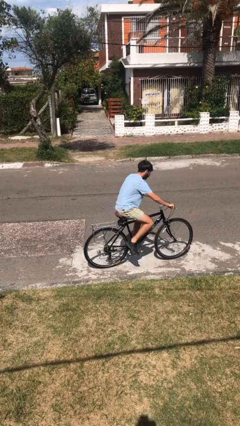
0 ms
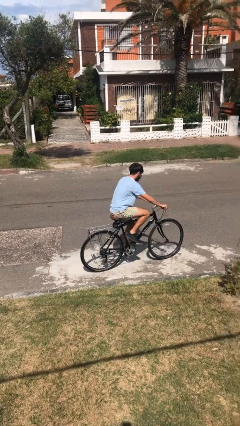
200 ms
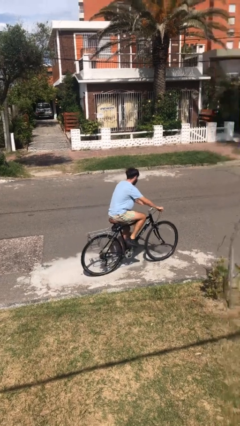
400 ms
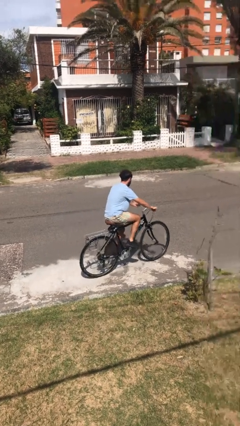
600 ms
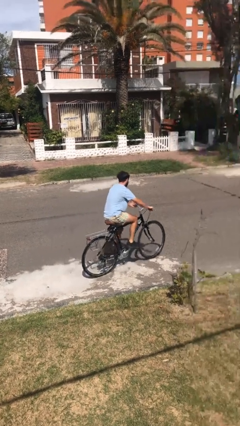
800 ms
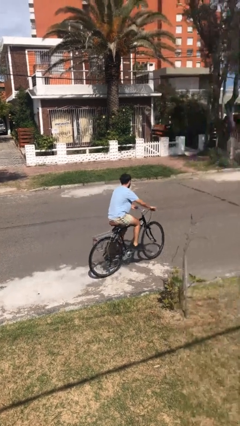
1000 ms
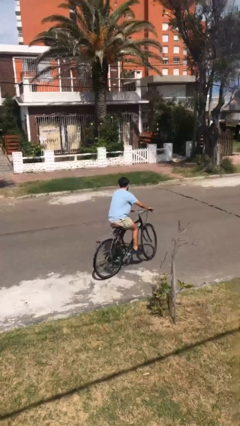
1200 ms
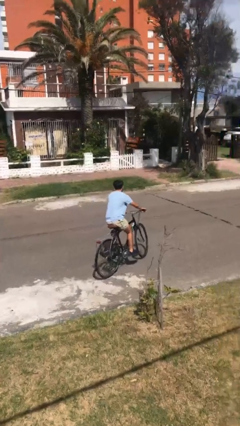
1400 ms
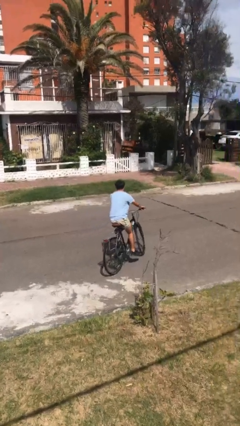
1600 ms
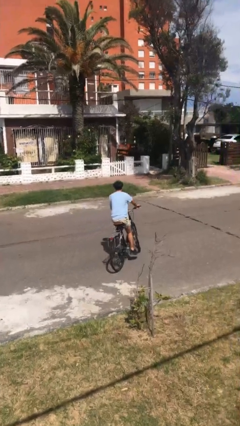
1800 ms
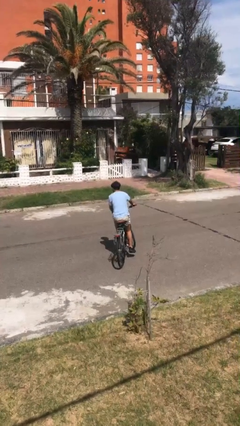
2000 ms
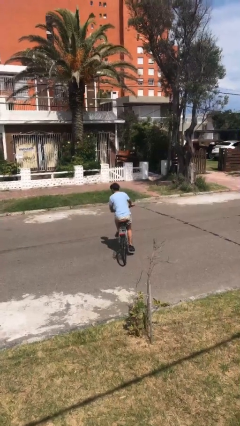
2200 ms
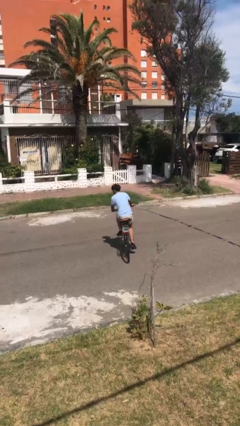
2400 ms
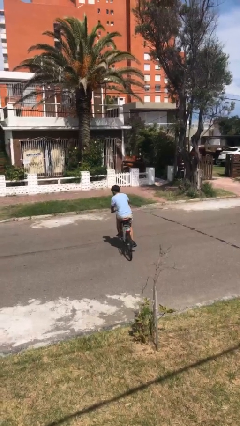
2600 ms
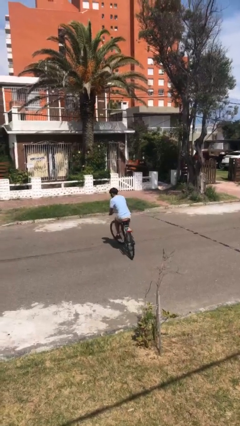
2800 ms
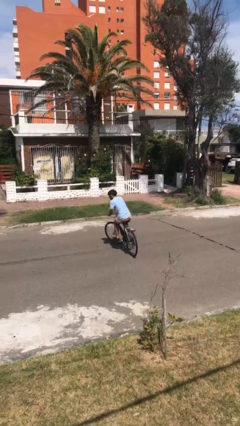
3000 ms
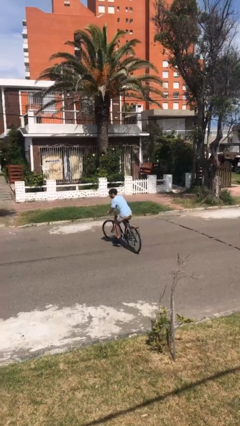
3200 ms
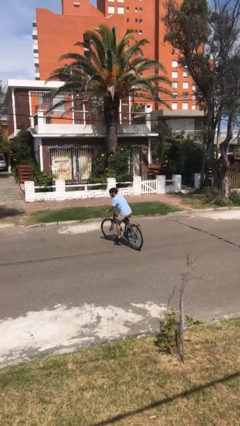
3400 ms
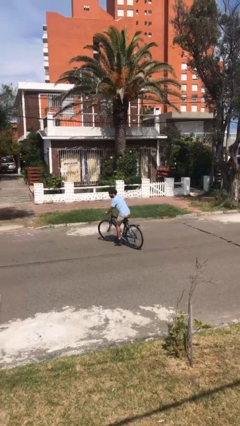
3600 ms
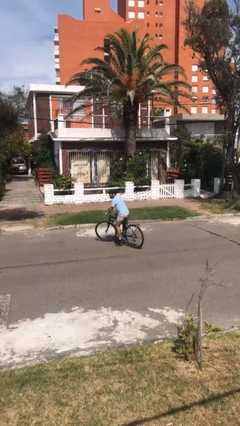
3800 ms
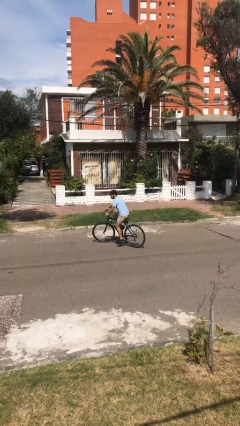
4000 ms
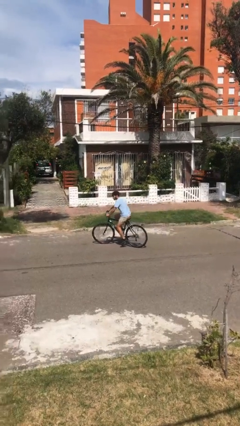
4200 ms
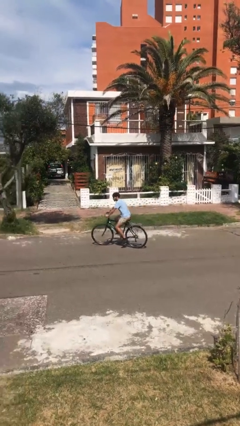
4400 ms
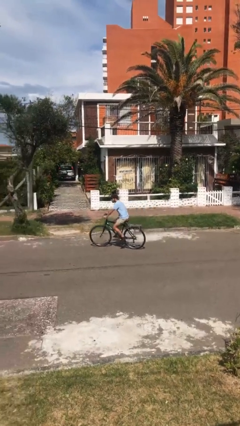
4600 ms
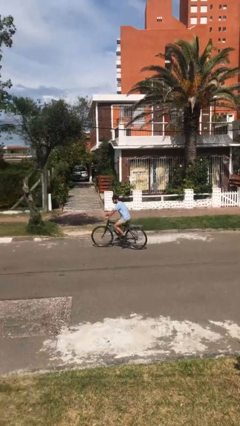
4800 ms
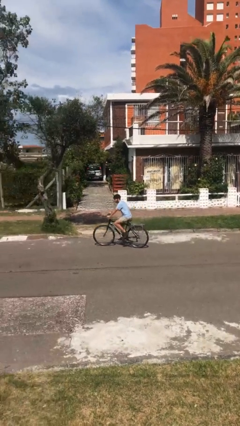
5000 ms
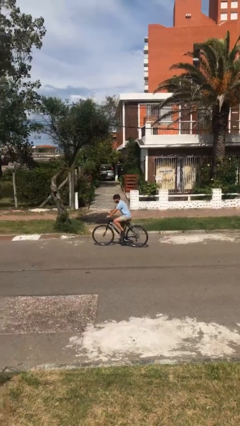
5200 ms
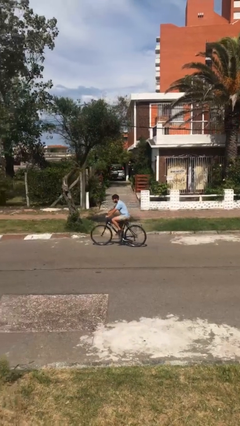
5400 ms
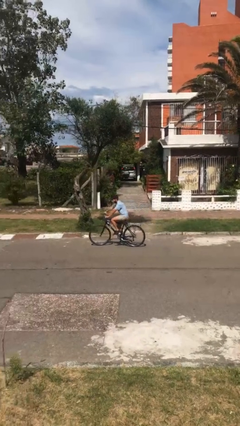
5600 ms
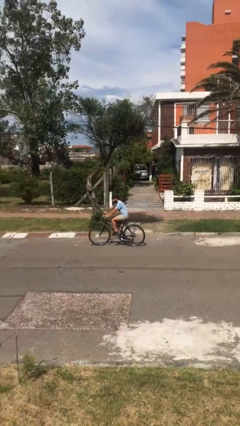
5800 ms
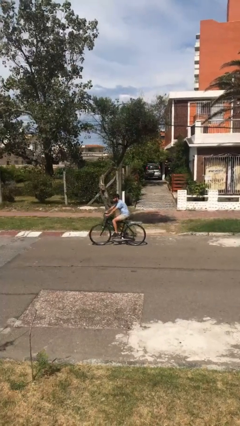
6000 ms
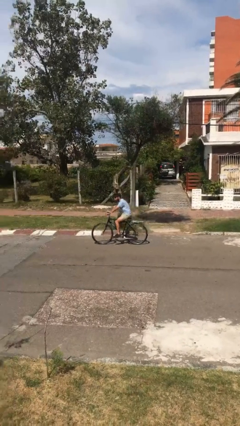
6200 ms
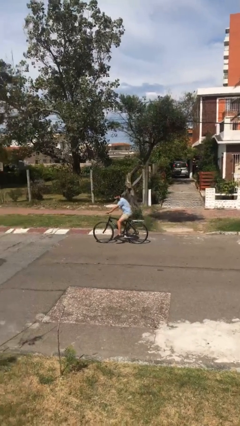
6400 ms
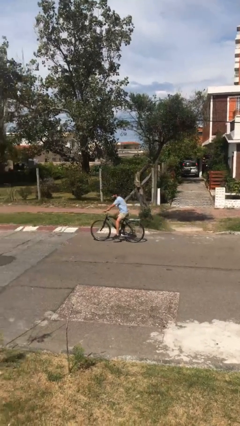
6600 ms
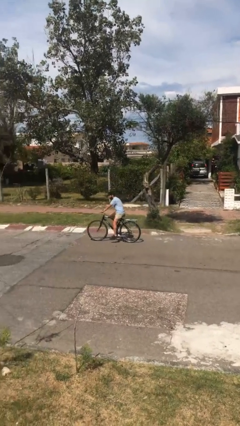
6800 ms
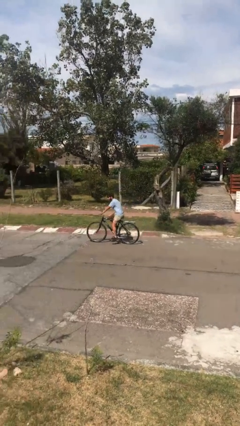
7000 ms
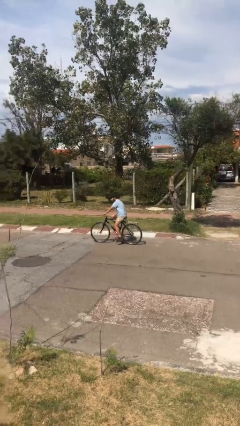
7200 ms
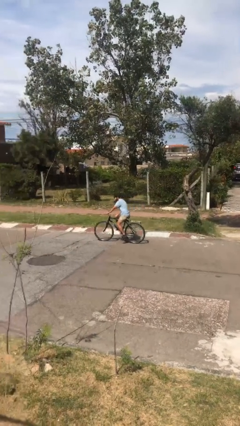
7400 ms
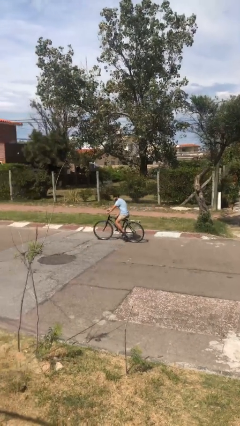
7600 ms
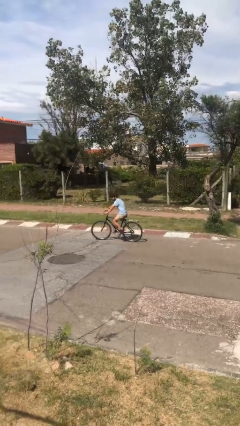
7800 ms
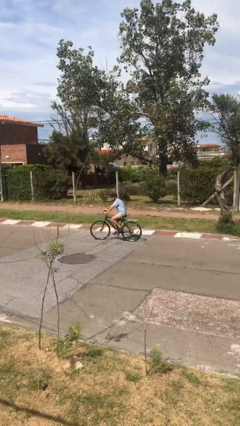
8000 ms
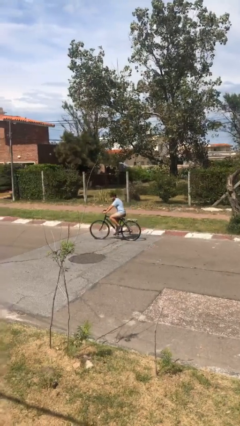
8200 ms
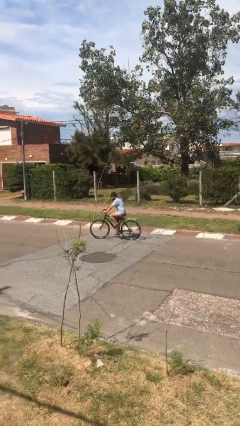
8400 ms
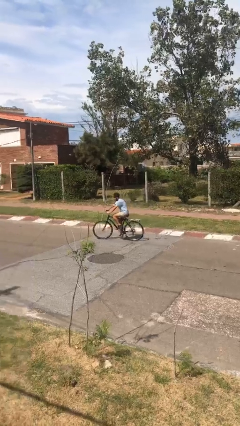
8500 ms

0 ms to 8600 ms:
person rides bicycle

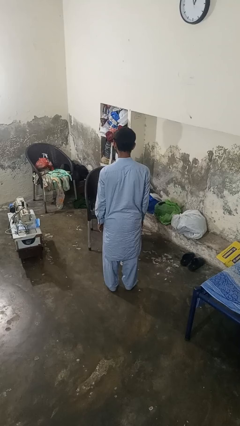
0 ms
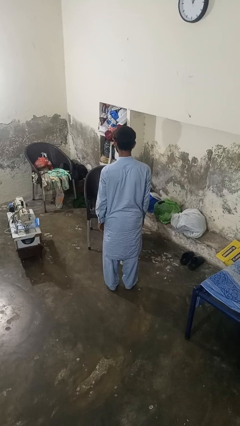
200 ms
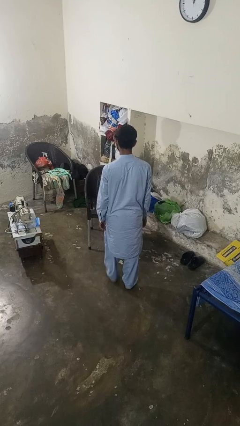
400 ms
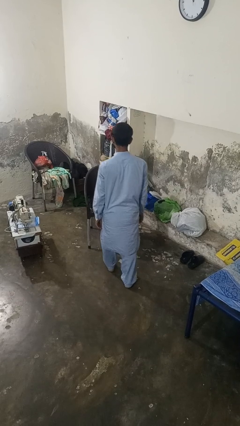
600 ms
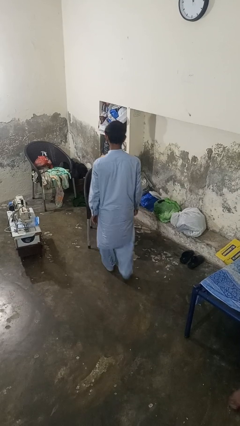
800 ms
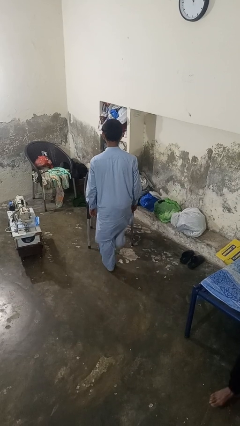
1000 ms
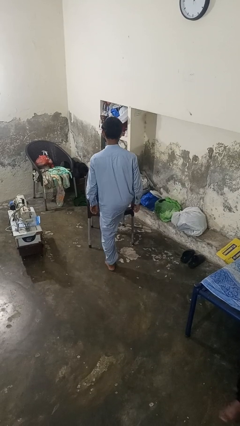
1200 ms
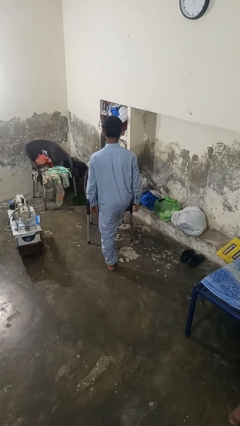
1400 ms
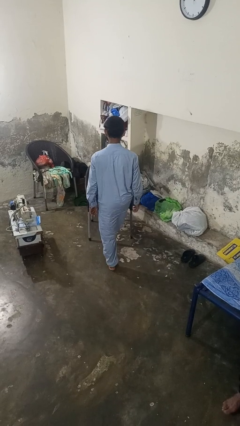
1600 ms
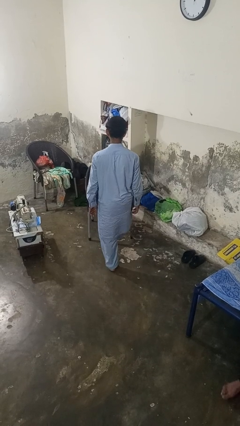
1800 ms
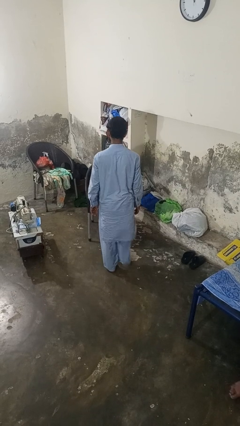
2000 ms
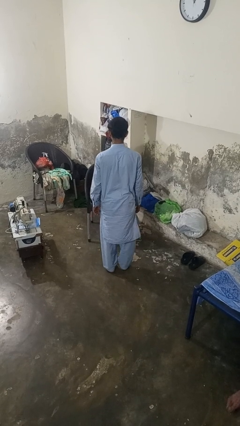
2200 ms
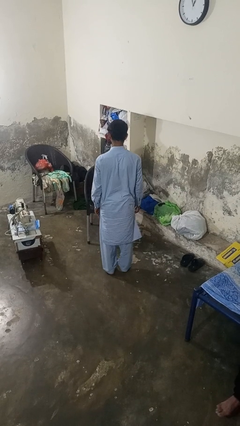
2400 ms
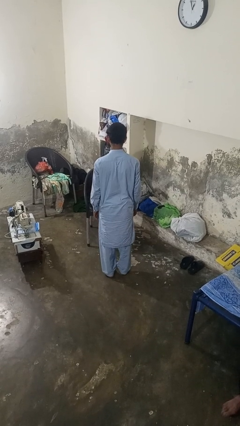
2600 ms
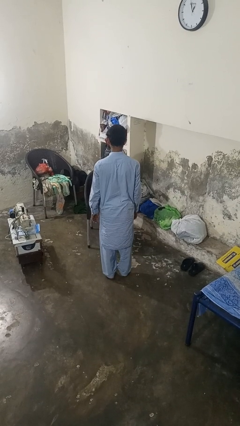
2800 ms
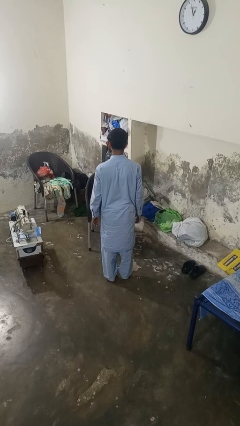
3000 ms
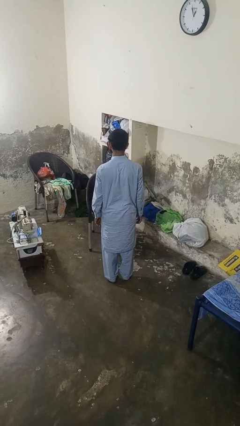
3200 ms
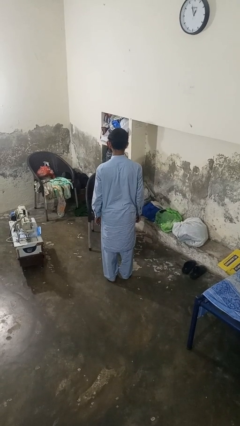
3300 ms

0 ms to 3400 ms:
person stubs toe

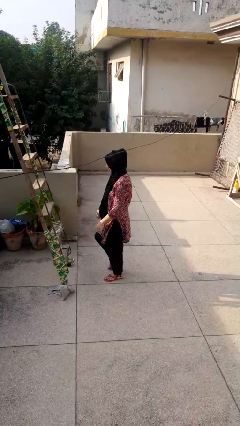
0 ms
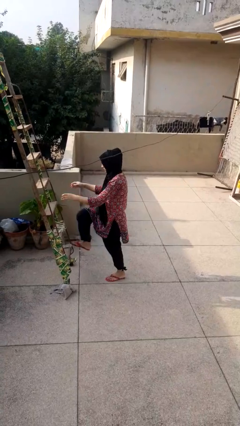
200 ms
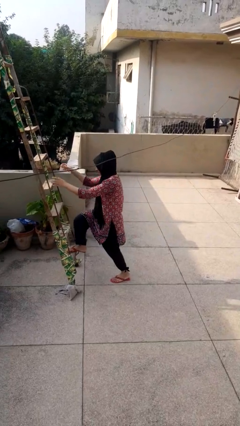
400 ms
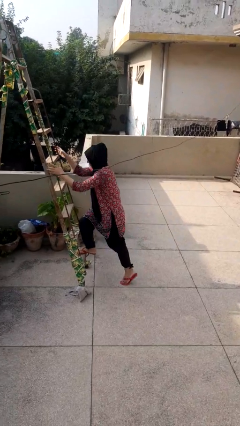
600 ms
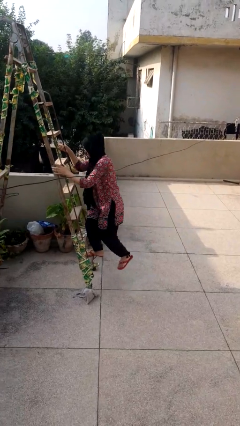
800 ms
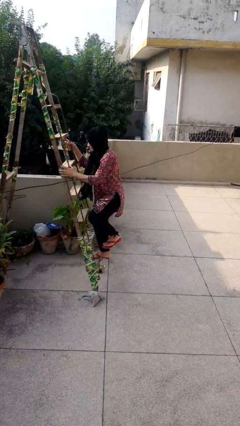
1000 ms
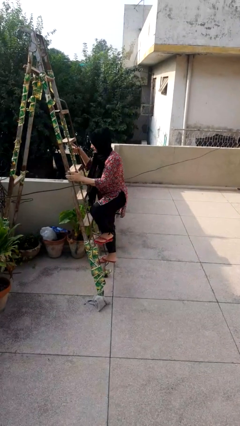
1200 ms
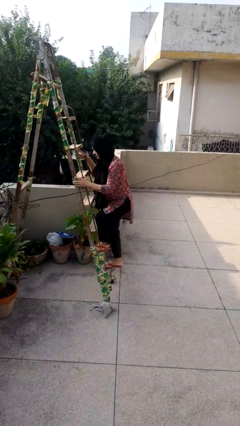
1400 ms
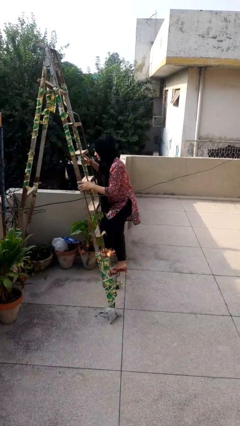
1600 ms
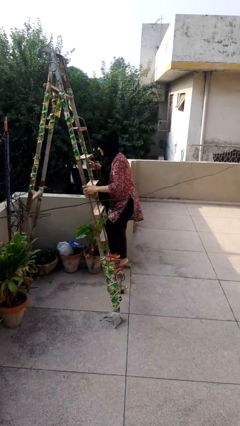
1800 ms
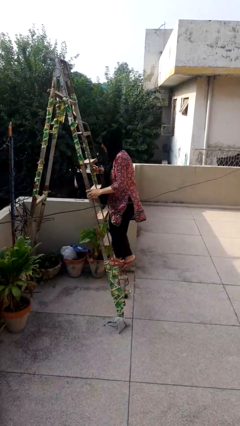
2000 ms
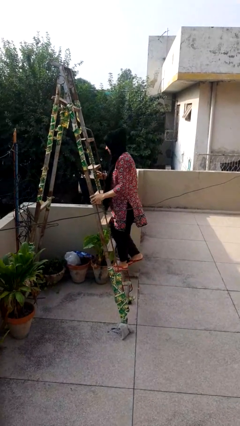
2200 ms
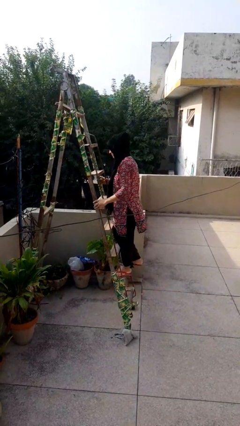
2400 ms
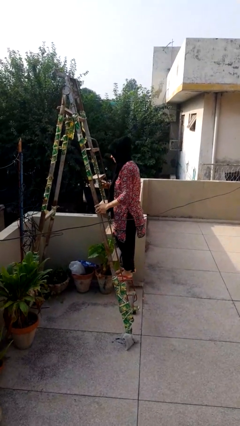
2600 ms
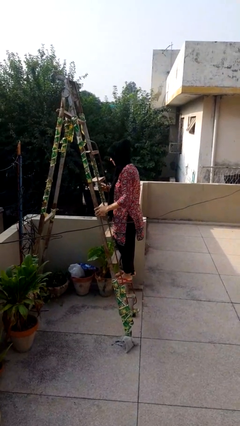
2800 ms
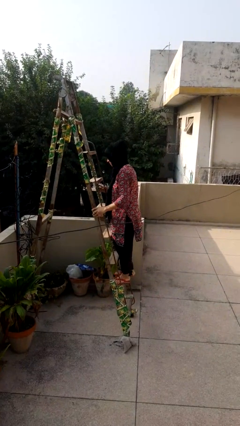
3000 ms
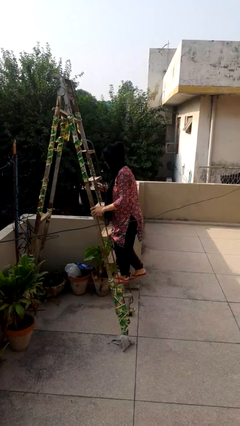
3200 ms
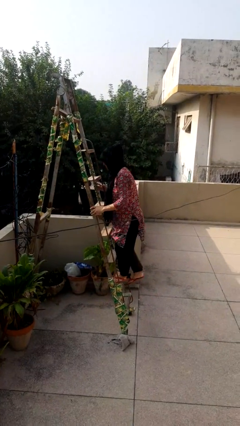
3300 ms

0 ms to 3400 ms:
person climbs up ladder

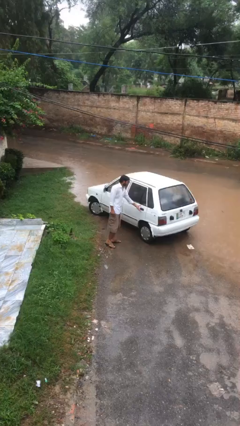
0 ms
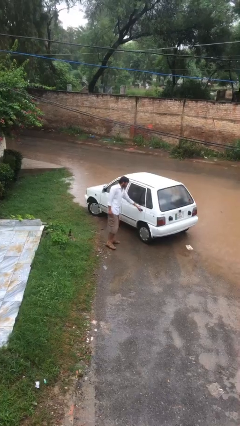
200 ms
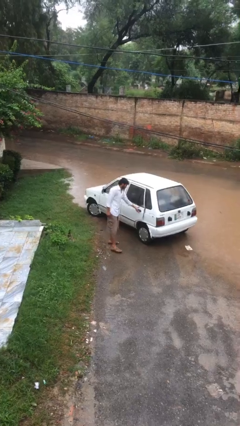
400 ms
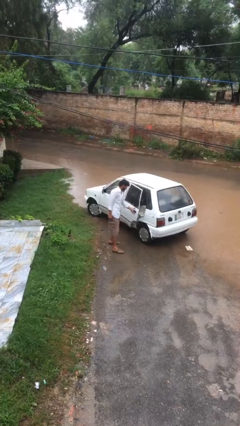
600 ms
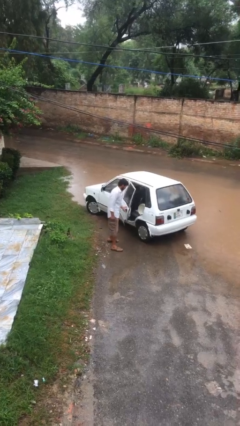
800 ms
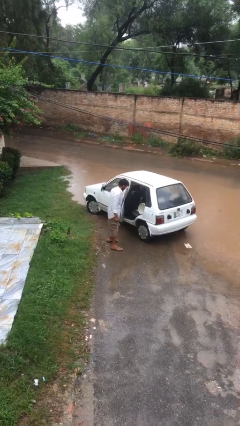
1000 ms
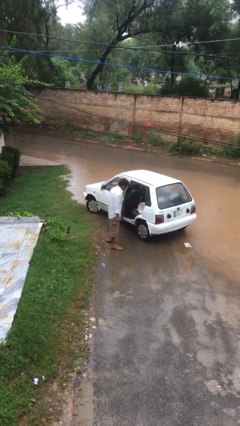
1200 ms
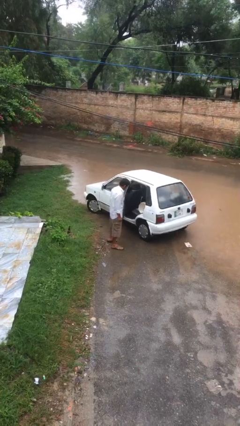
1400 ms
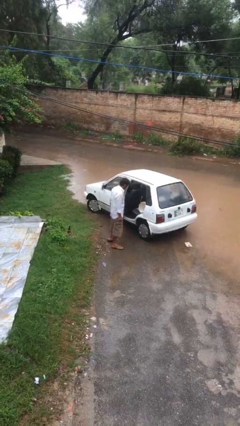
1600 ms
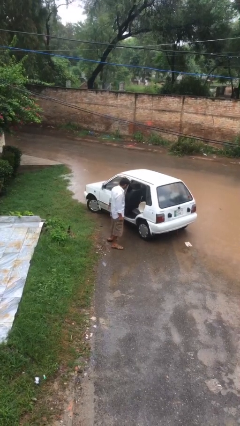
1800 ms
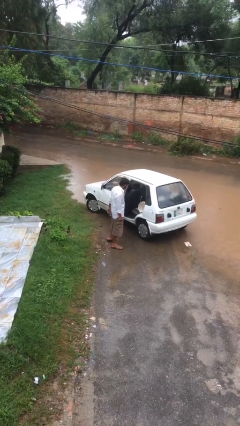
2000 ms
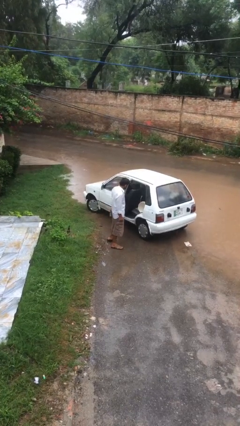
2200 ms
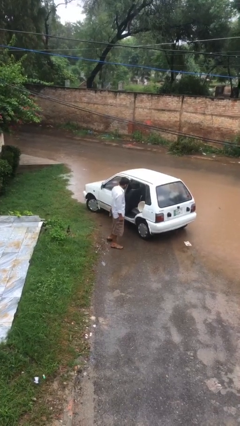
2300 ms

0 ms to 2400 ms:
person opens car door

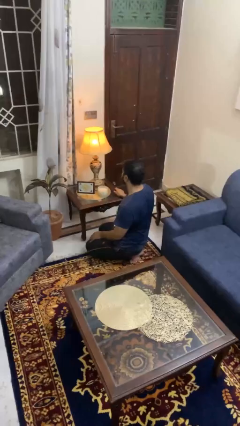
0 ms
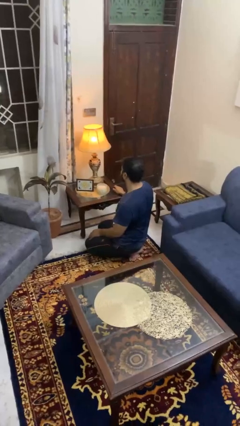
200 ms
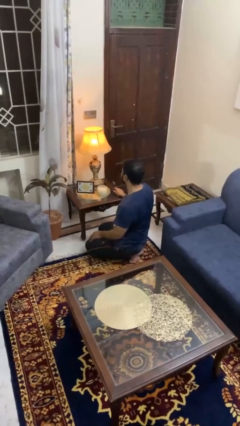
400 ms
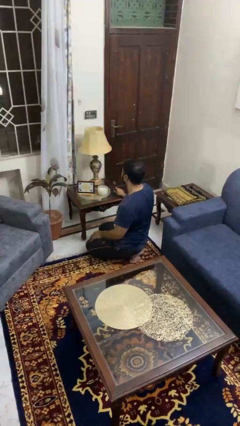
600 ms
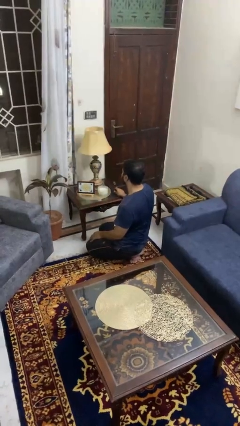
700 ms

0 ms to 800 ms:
person turns off lamp
